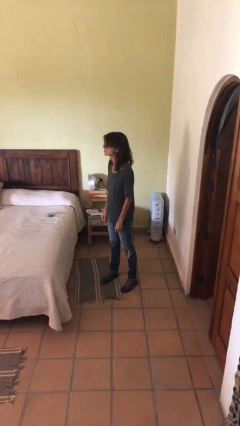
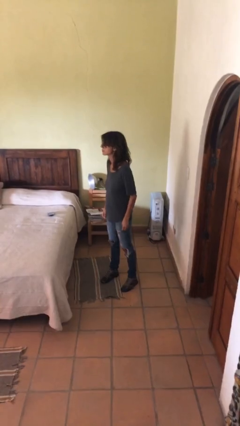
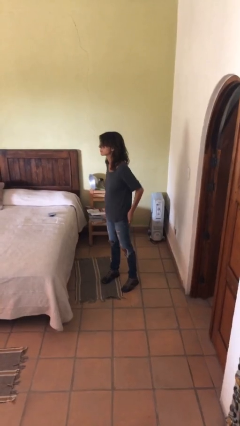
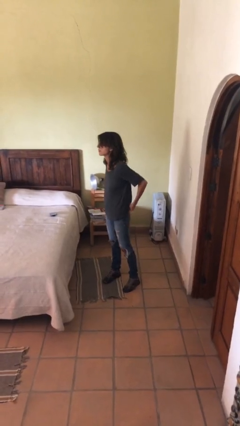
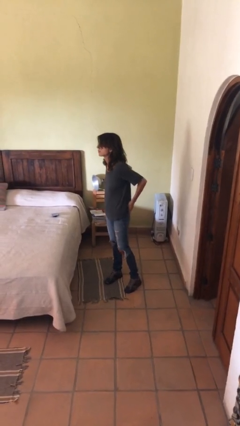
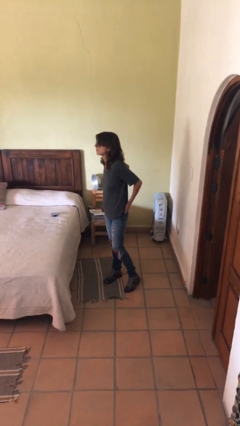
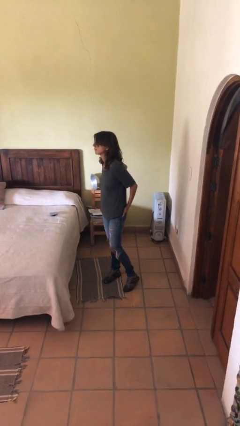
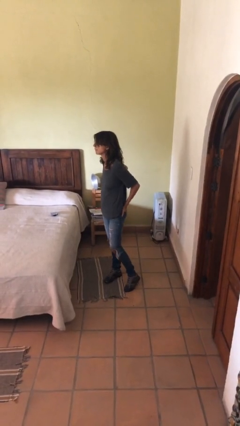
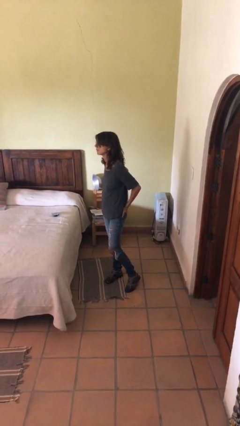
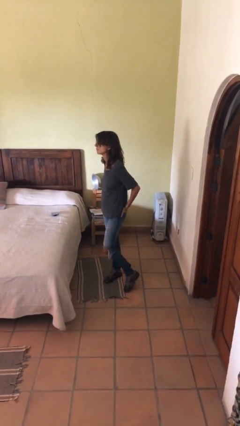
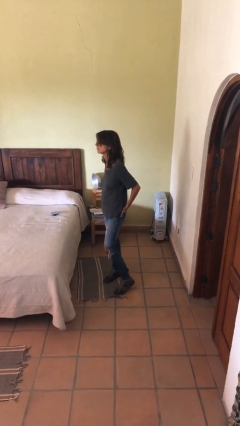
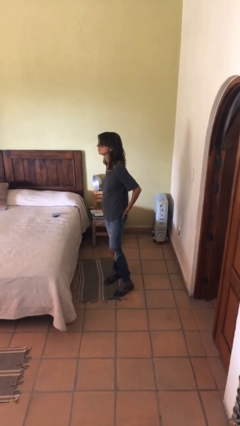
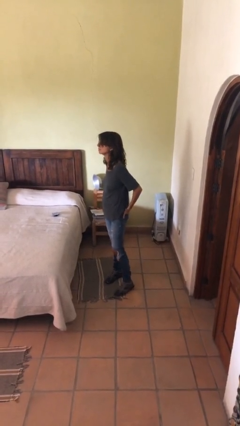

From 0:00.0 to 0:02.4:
person puts hands in back pockets

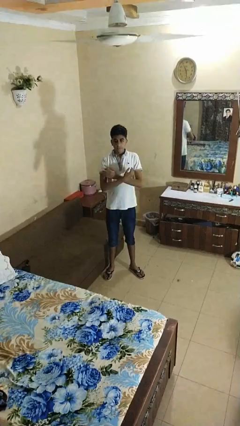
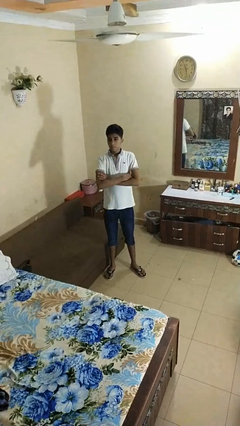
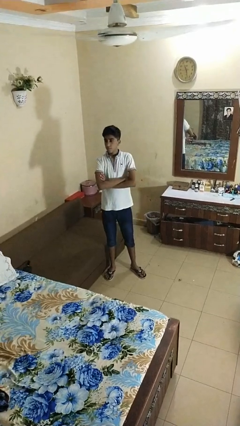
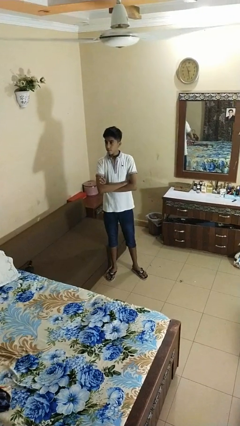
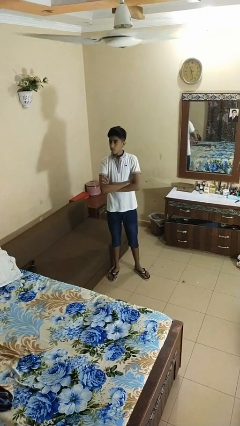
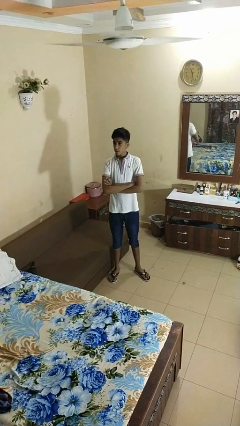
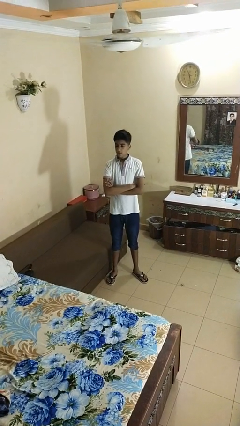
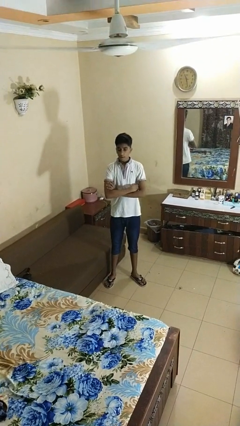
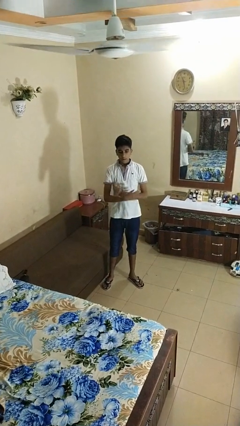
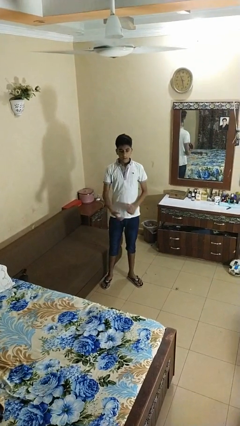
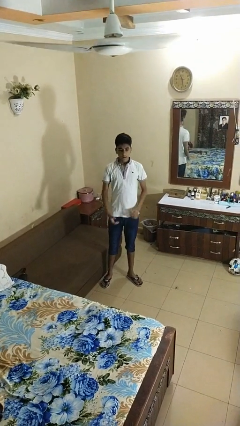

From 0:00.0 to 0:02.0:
person crosses arms

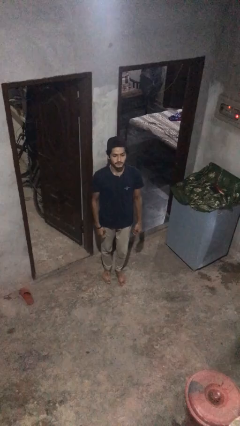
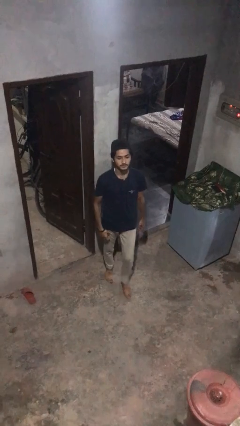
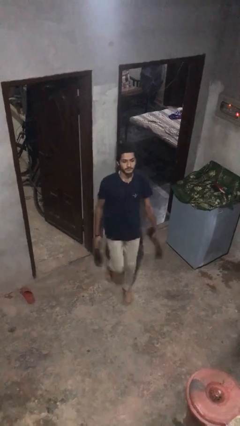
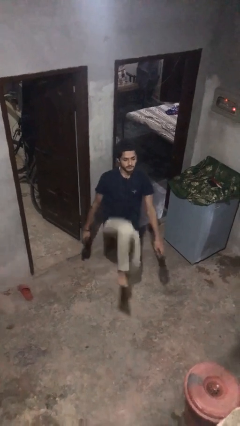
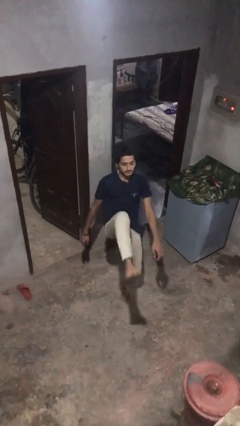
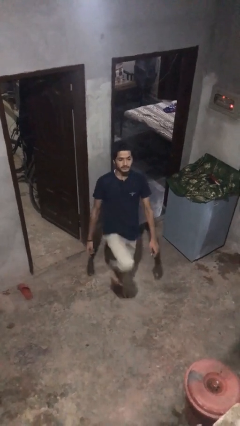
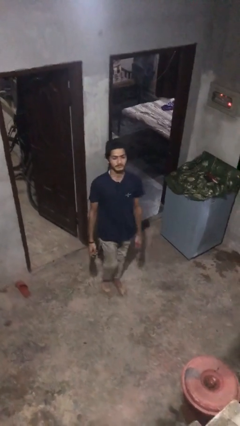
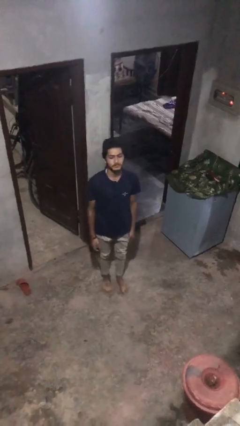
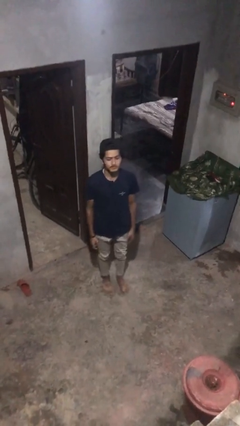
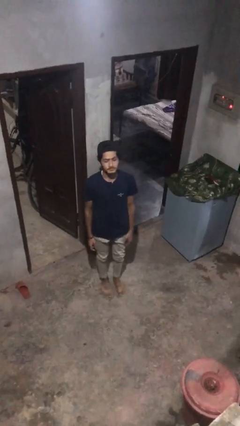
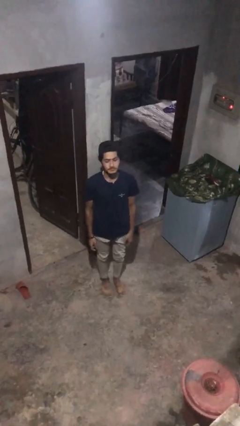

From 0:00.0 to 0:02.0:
person karate kicks

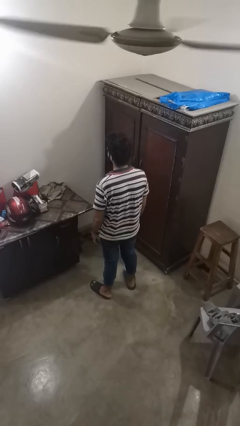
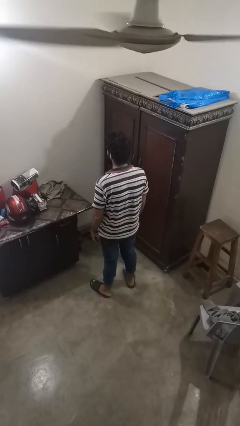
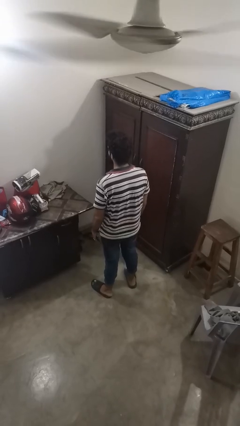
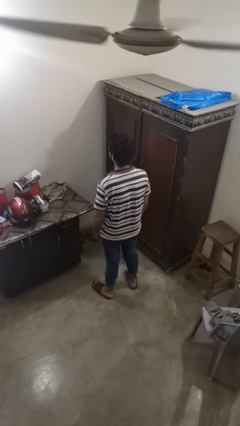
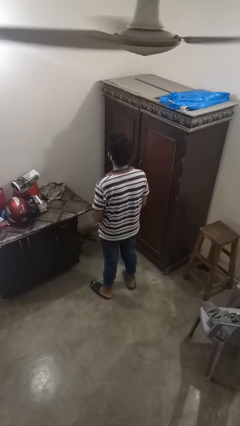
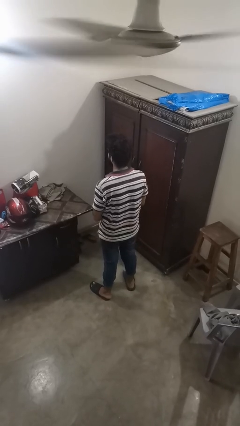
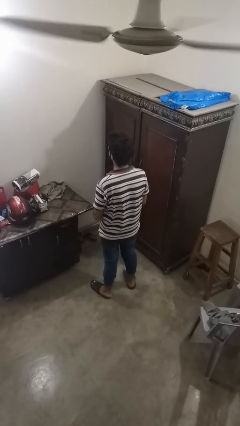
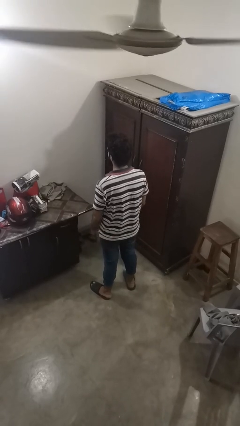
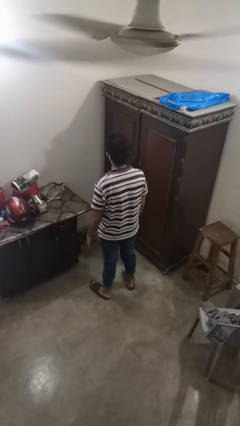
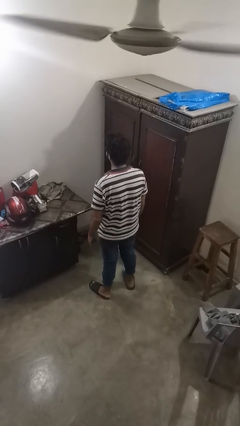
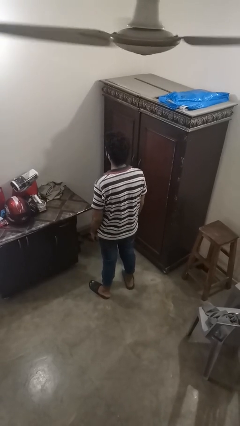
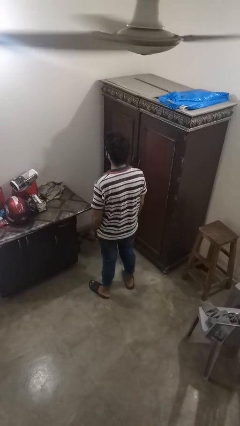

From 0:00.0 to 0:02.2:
person takes off ring

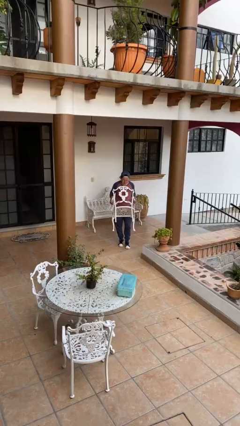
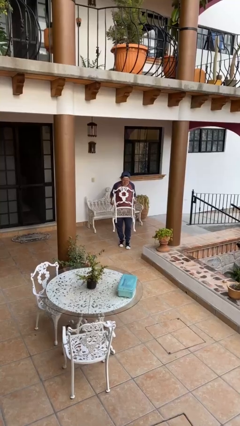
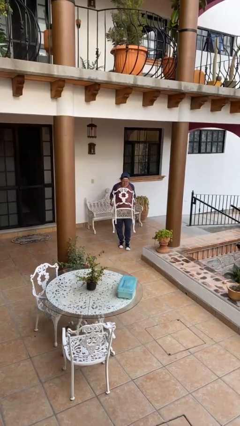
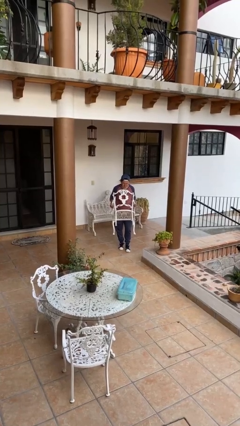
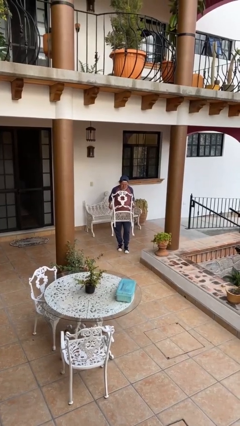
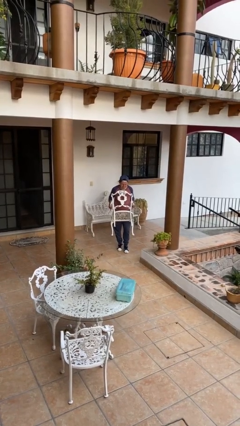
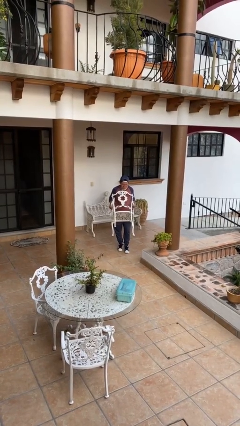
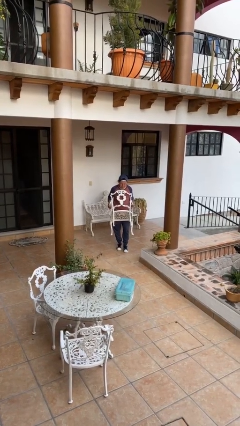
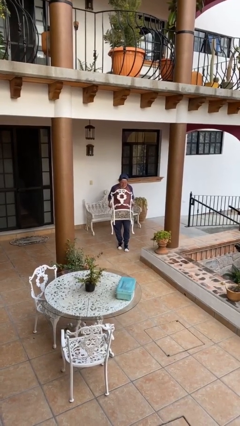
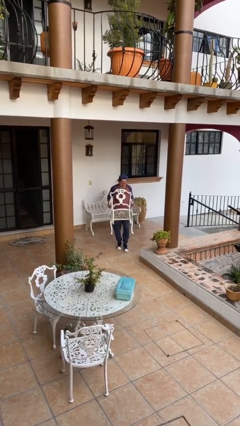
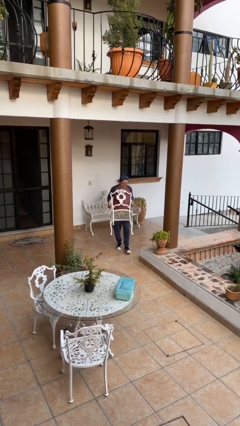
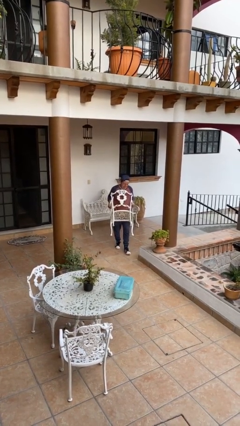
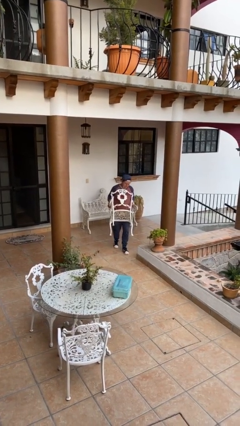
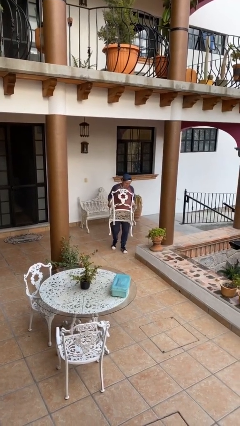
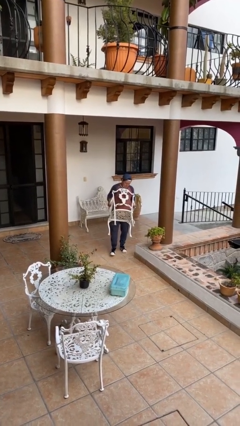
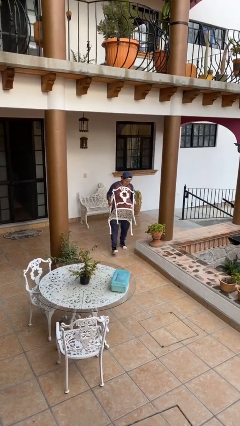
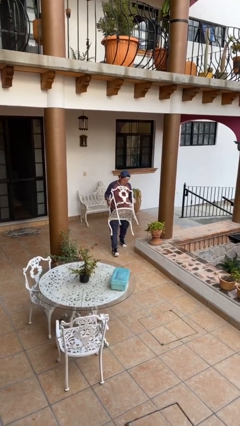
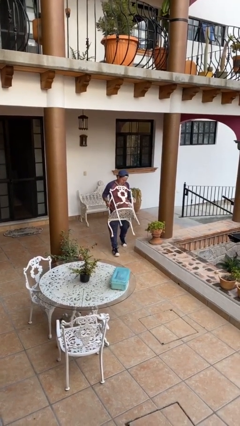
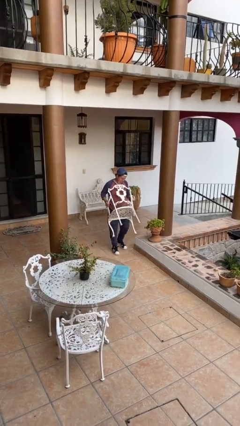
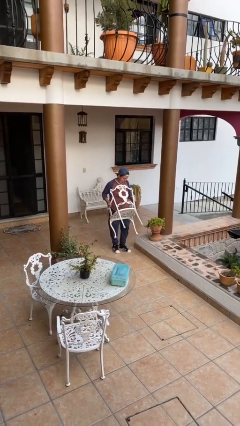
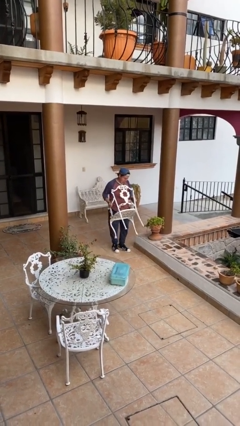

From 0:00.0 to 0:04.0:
person carries heavy object

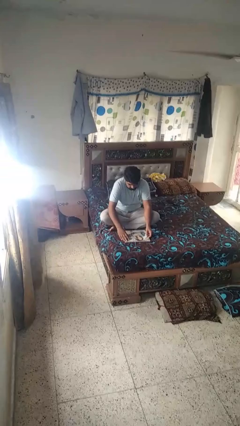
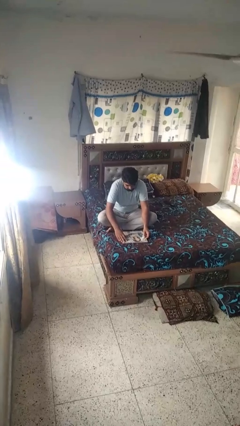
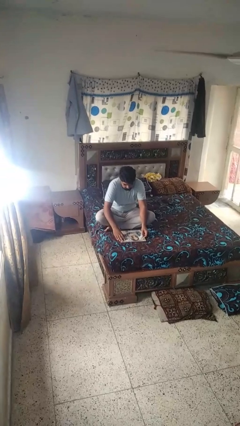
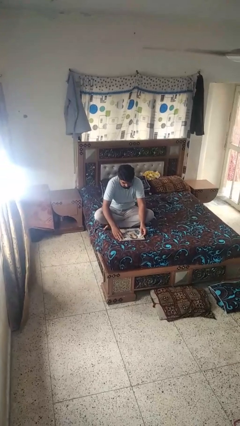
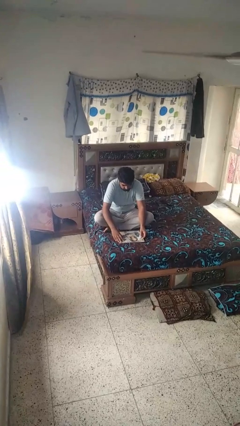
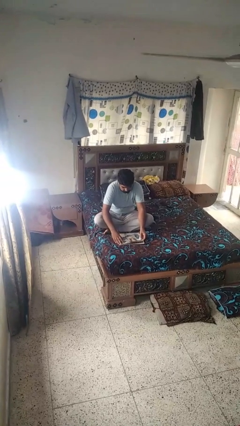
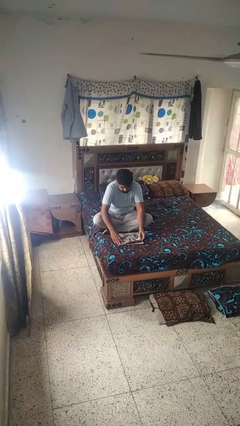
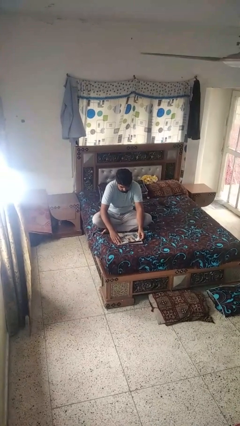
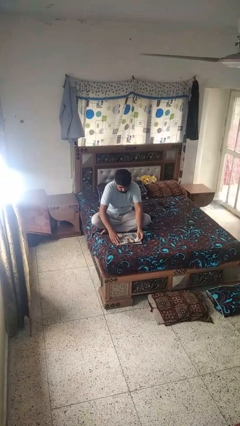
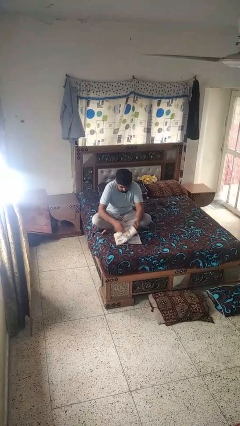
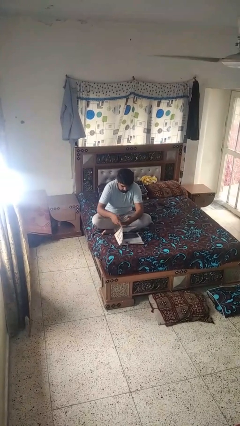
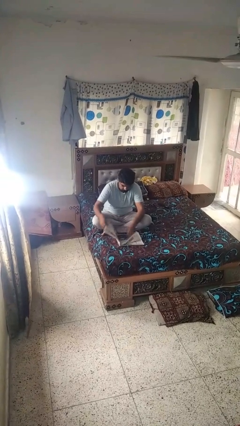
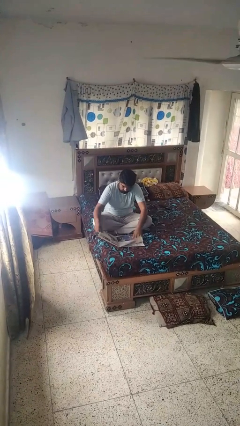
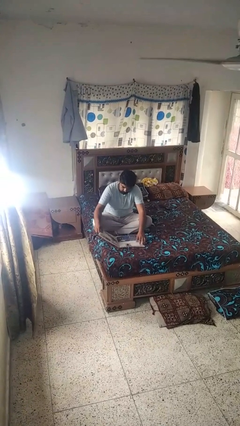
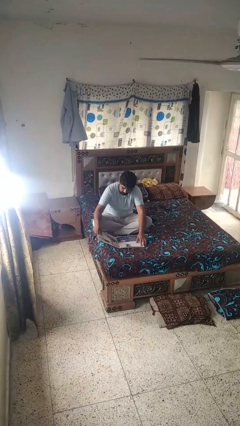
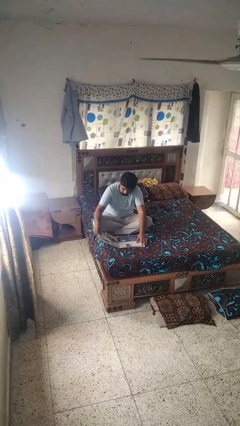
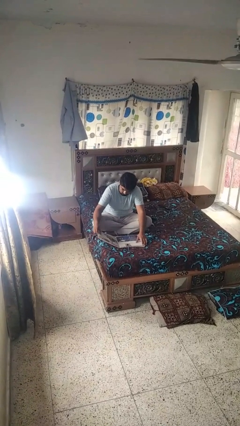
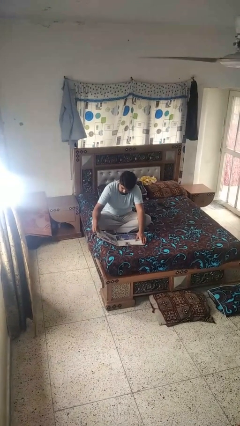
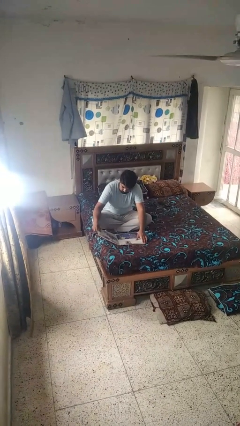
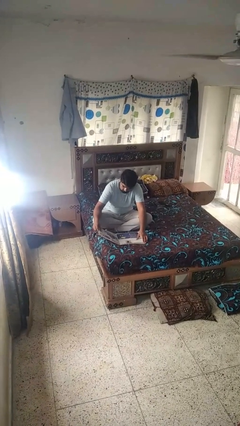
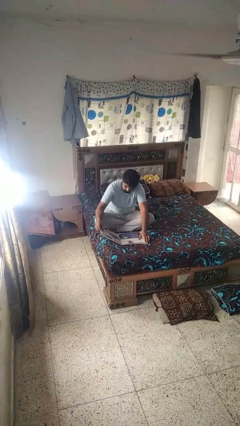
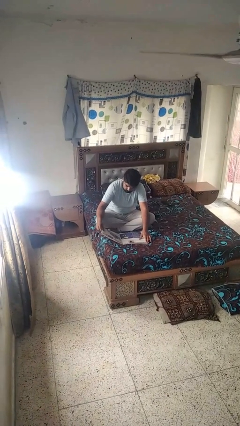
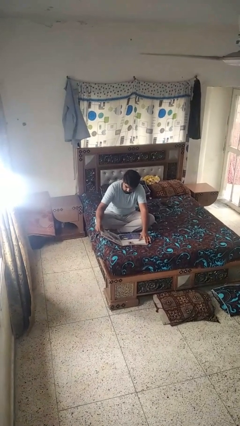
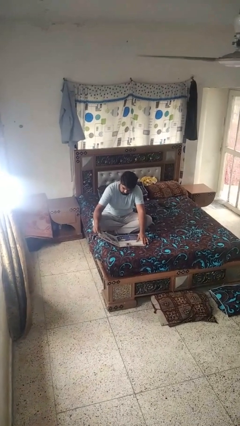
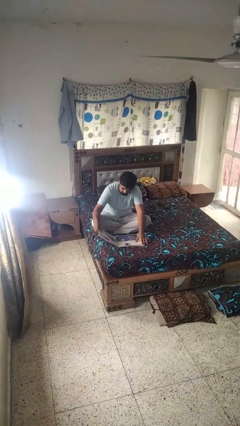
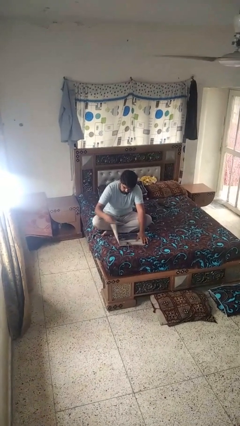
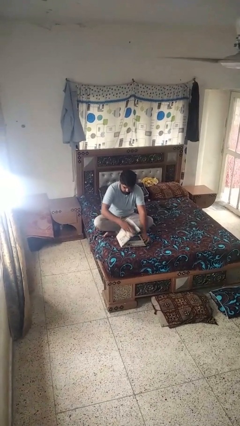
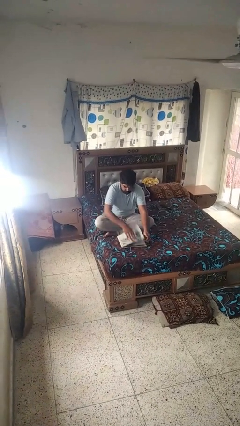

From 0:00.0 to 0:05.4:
person reads magazine
